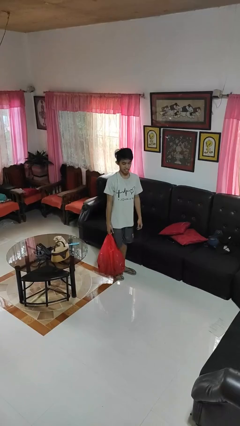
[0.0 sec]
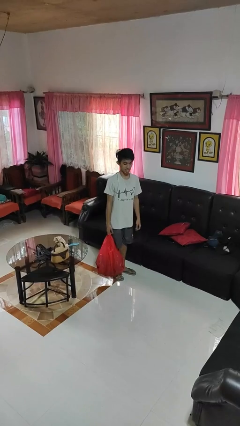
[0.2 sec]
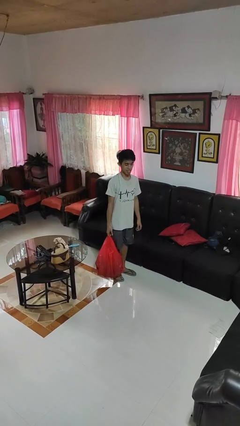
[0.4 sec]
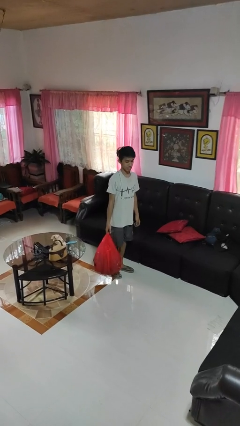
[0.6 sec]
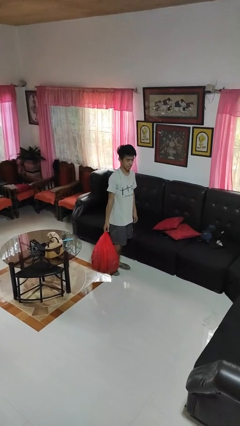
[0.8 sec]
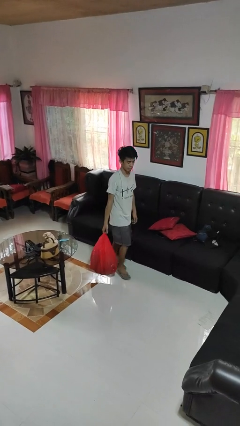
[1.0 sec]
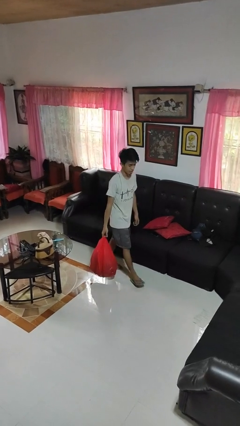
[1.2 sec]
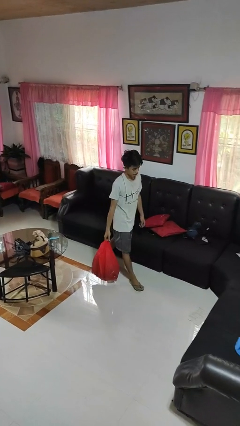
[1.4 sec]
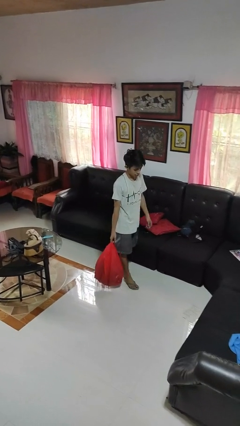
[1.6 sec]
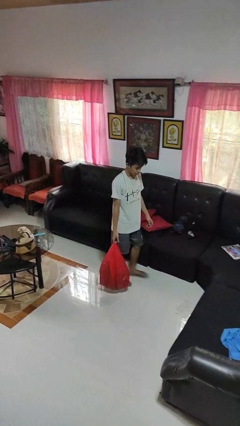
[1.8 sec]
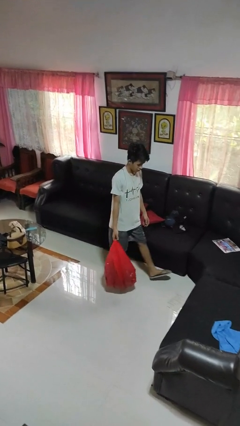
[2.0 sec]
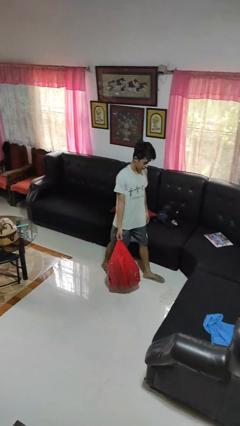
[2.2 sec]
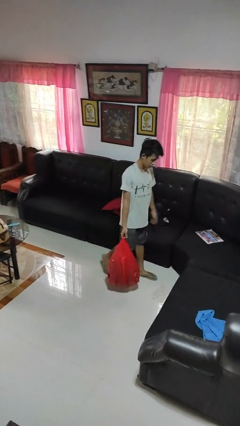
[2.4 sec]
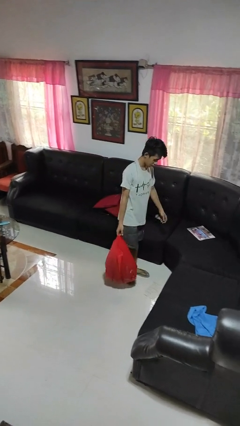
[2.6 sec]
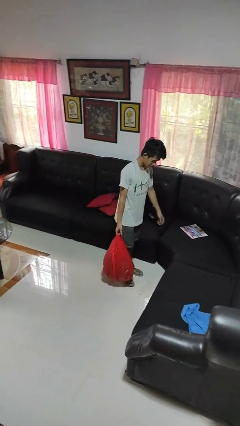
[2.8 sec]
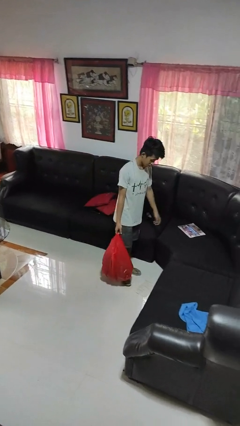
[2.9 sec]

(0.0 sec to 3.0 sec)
person carries groceries

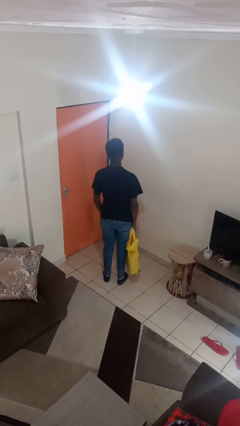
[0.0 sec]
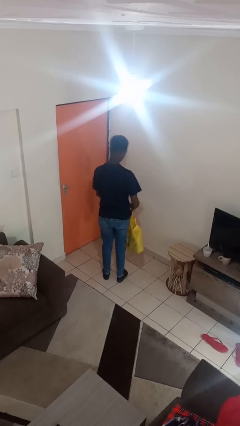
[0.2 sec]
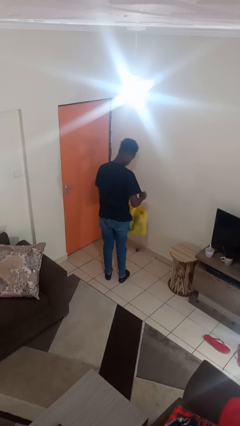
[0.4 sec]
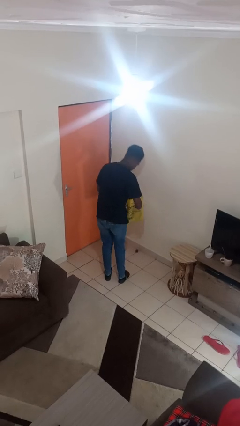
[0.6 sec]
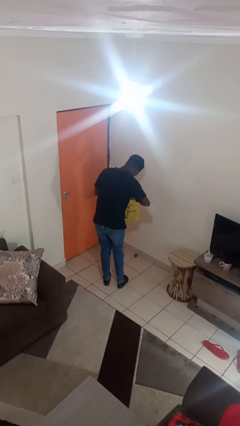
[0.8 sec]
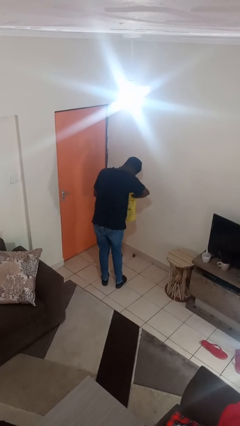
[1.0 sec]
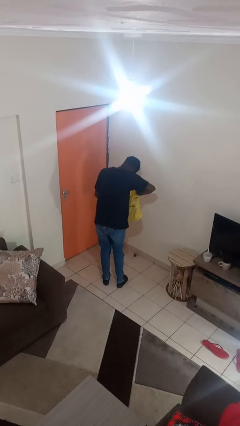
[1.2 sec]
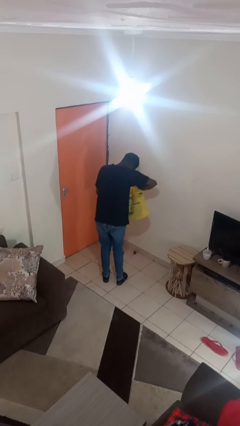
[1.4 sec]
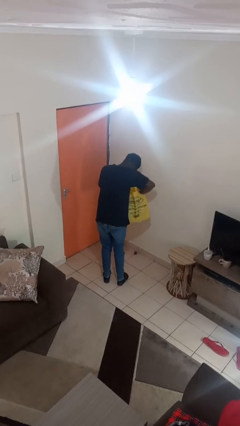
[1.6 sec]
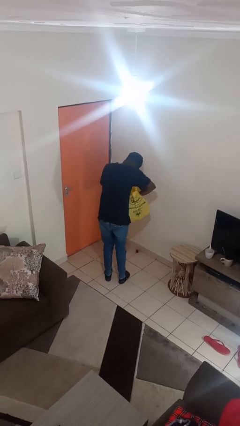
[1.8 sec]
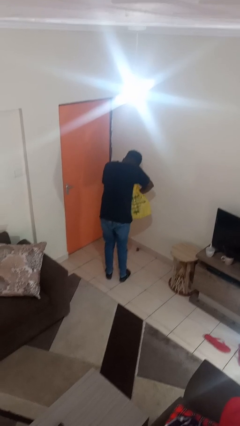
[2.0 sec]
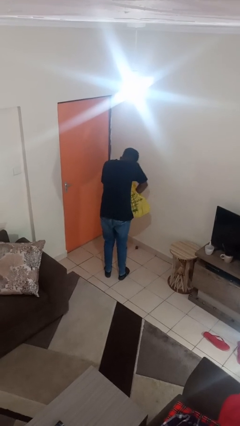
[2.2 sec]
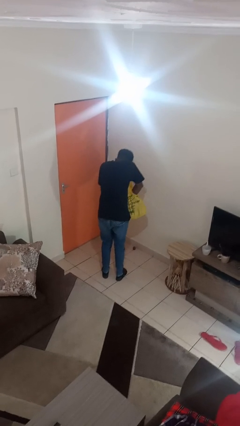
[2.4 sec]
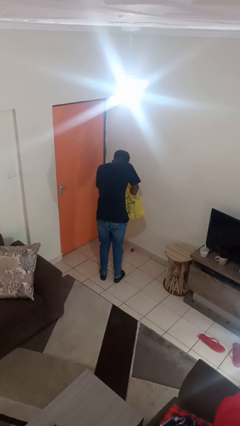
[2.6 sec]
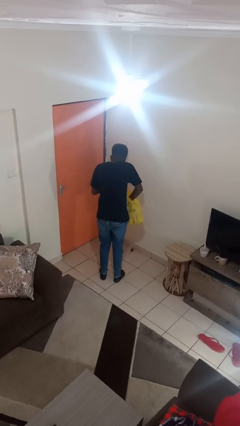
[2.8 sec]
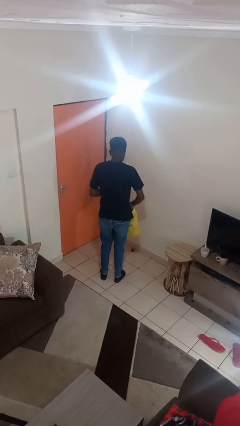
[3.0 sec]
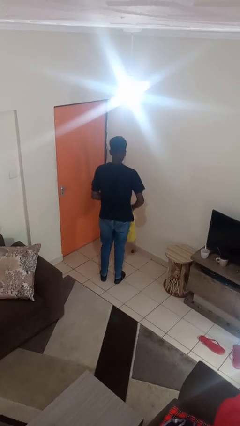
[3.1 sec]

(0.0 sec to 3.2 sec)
person searches in bag

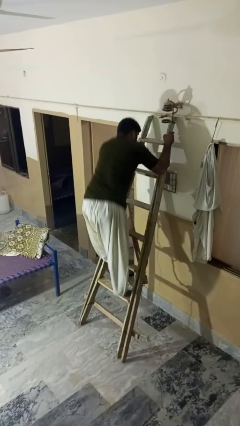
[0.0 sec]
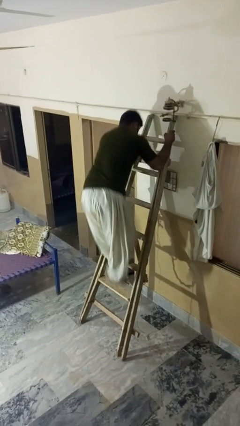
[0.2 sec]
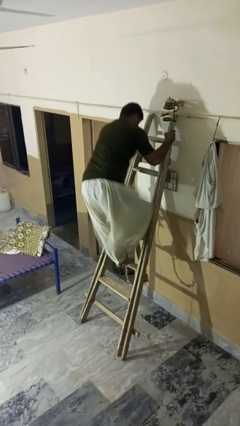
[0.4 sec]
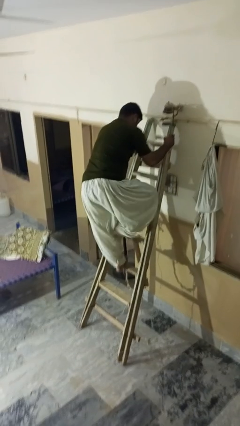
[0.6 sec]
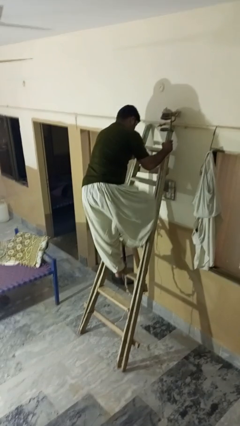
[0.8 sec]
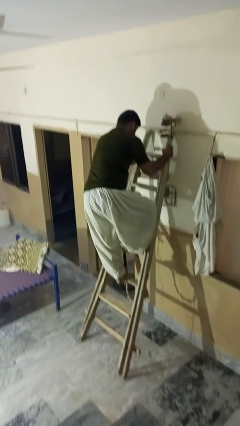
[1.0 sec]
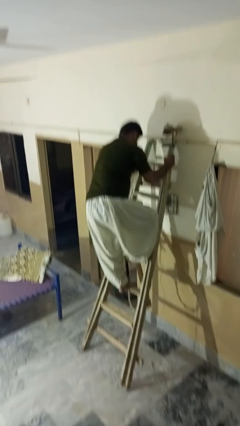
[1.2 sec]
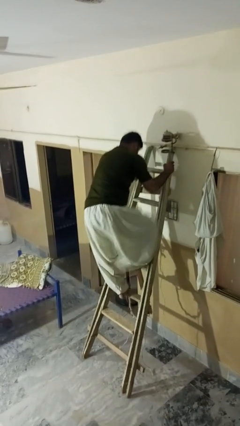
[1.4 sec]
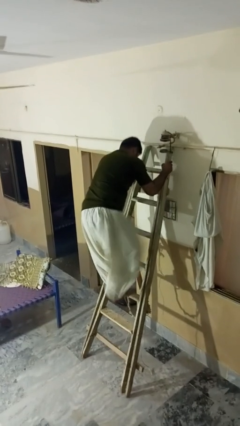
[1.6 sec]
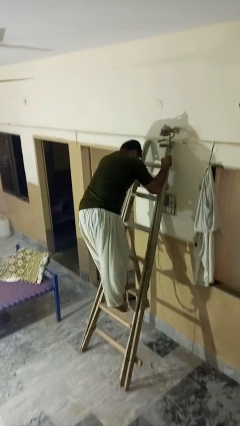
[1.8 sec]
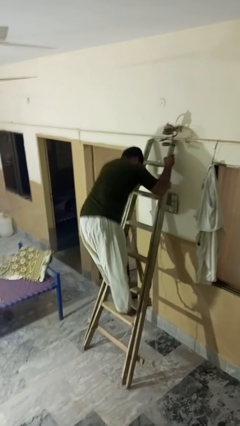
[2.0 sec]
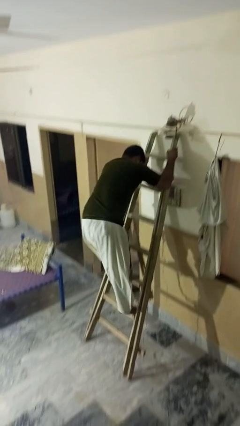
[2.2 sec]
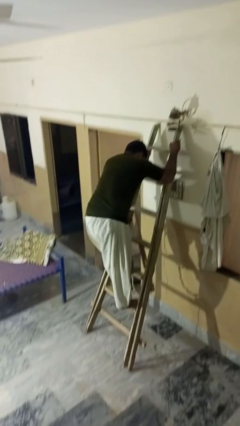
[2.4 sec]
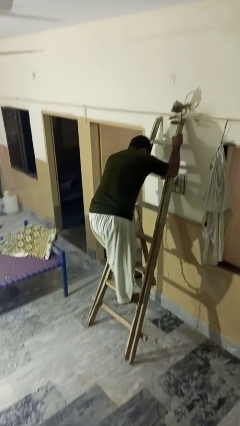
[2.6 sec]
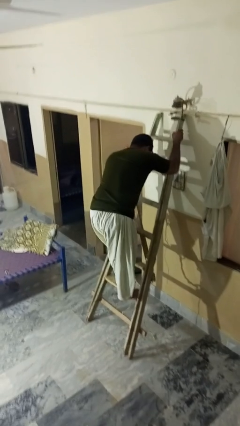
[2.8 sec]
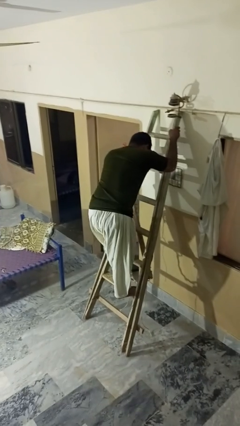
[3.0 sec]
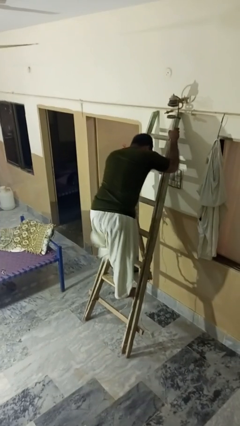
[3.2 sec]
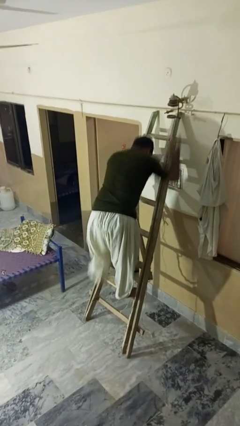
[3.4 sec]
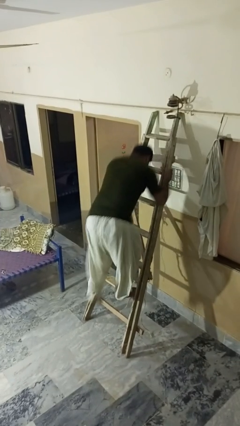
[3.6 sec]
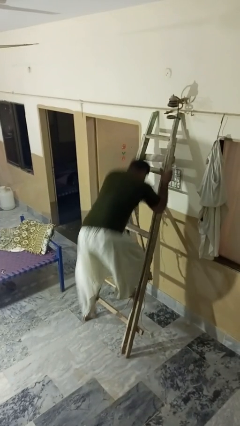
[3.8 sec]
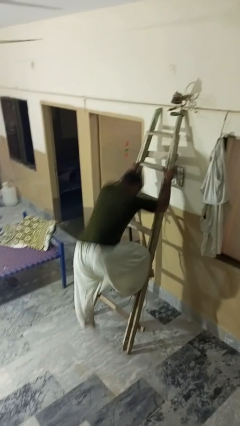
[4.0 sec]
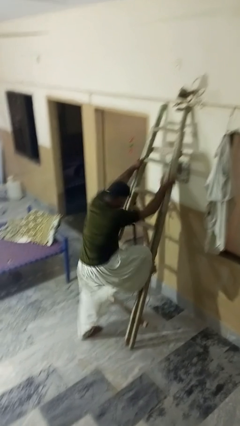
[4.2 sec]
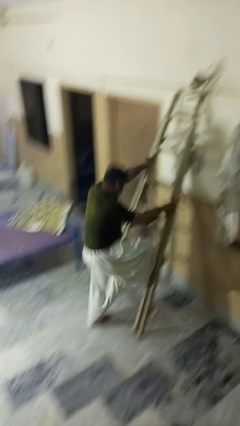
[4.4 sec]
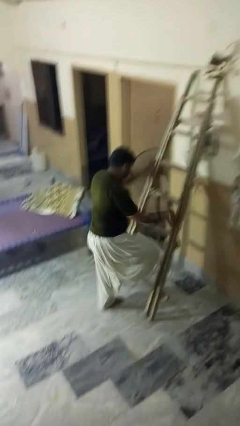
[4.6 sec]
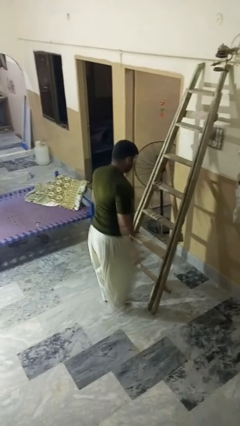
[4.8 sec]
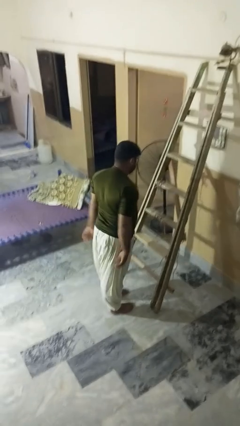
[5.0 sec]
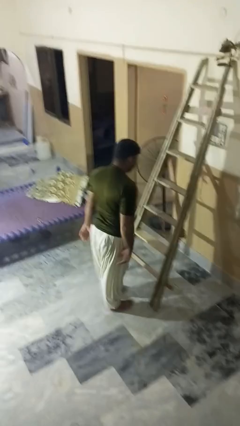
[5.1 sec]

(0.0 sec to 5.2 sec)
person climbs down ladder

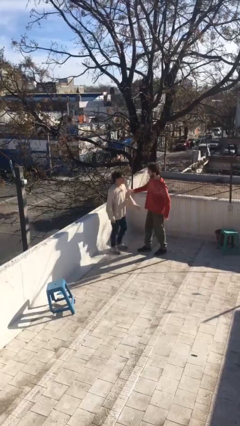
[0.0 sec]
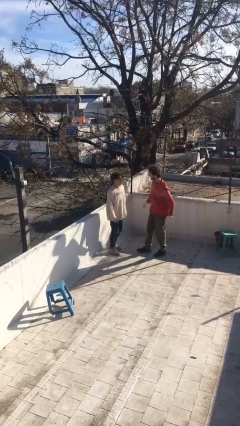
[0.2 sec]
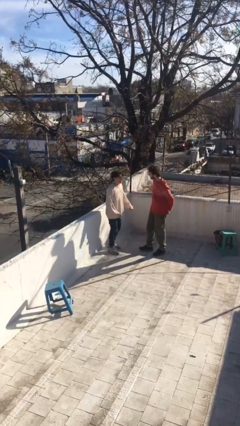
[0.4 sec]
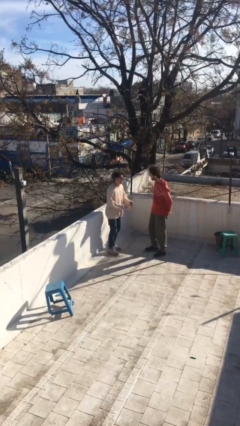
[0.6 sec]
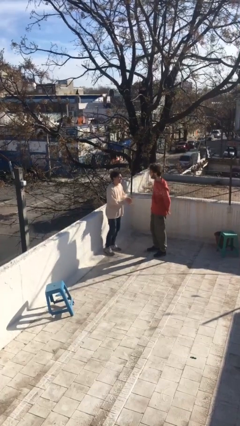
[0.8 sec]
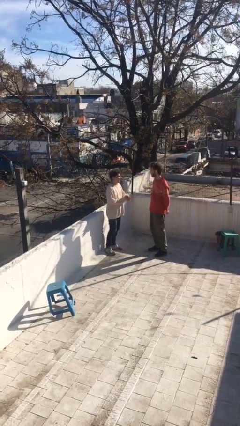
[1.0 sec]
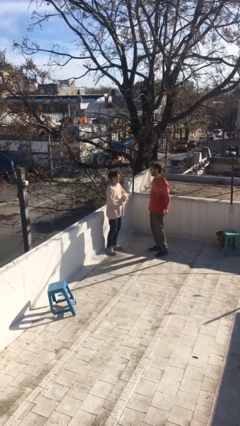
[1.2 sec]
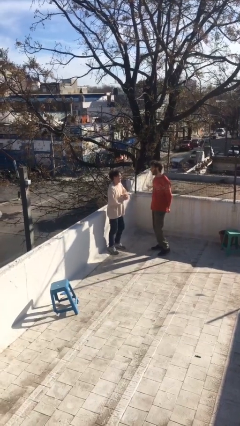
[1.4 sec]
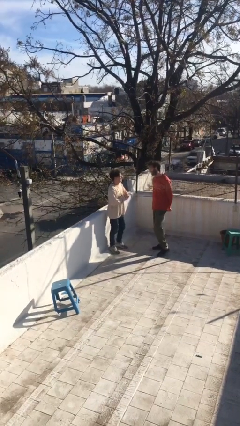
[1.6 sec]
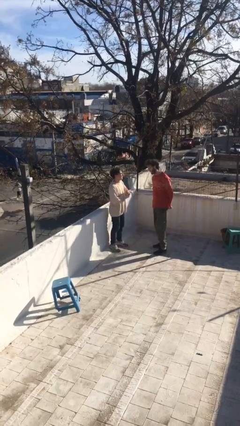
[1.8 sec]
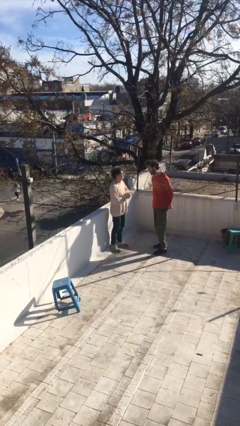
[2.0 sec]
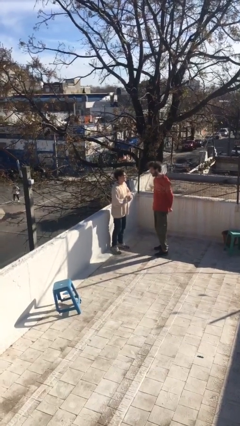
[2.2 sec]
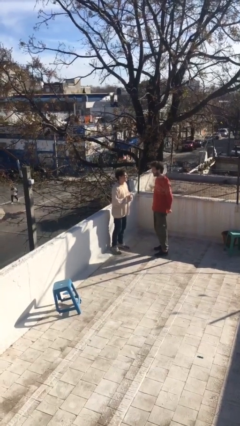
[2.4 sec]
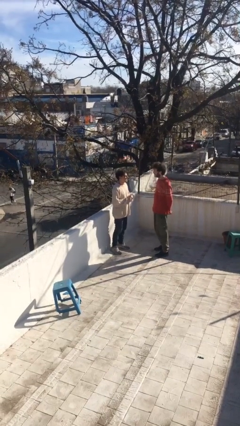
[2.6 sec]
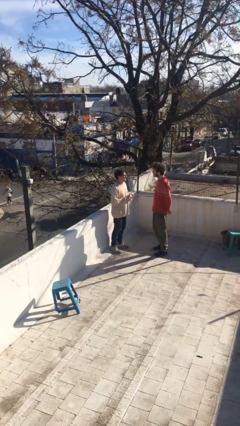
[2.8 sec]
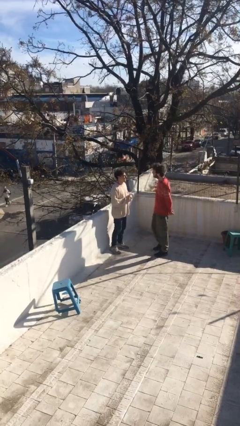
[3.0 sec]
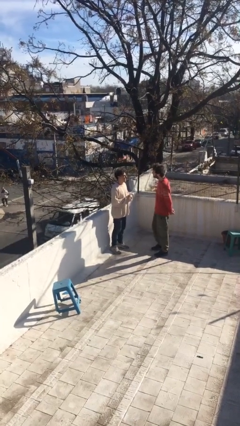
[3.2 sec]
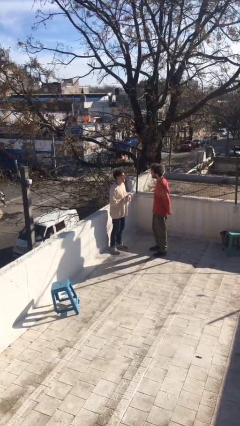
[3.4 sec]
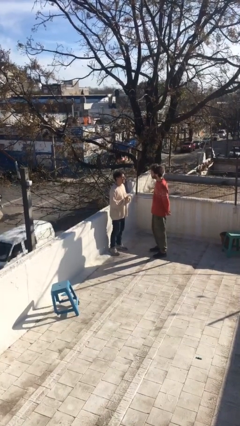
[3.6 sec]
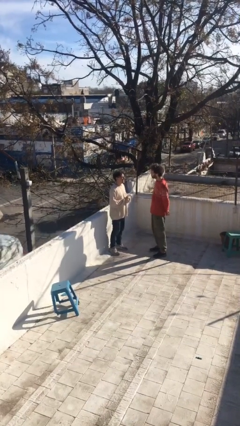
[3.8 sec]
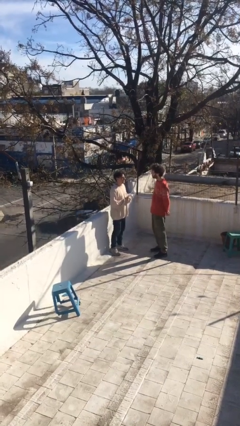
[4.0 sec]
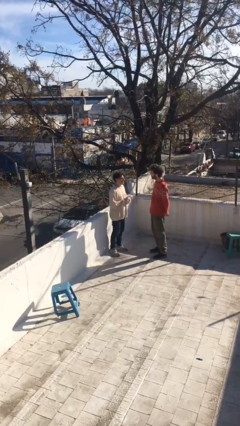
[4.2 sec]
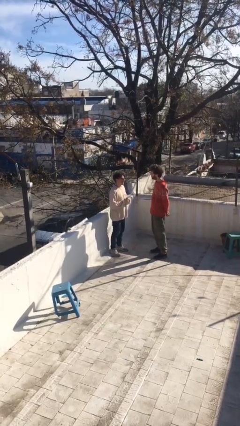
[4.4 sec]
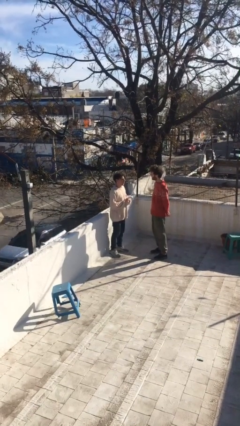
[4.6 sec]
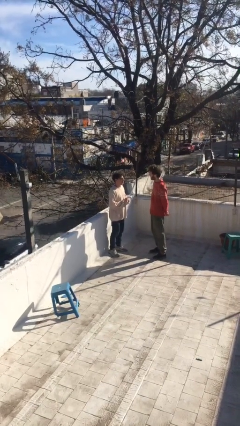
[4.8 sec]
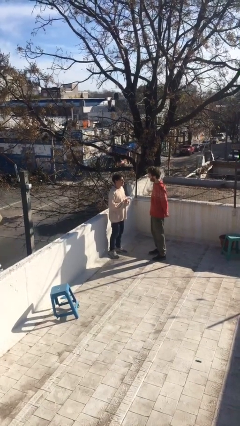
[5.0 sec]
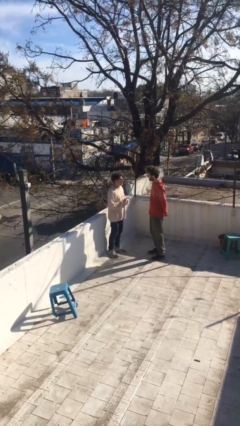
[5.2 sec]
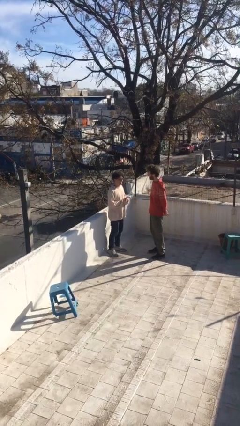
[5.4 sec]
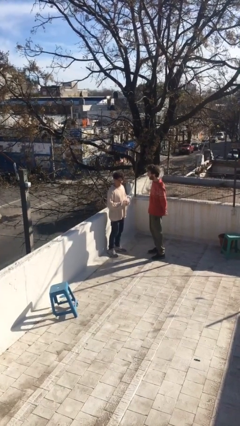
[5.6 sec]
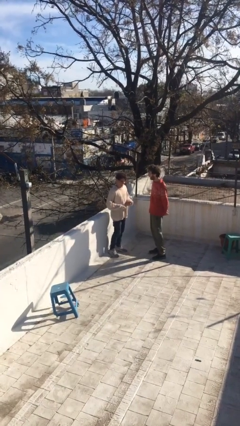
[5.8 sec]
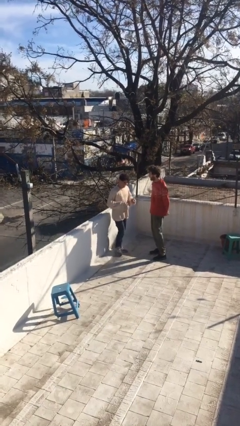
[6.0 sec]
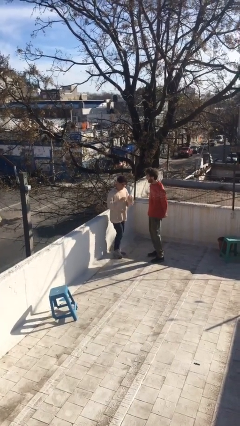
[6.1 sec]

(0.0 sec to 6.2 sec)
person talks to person
